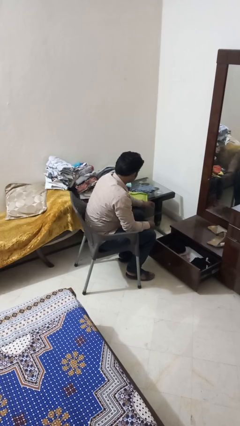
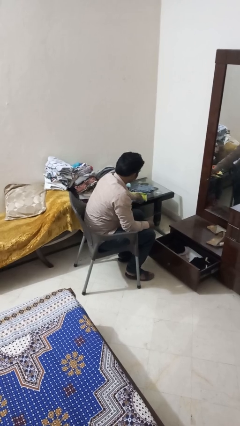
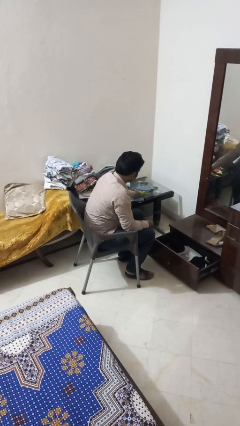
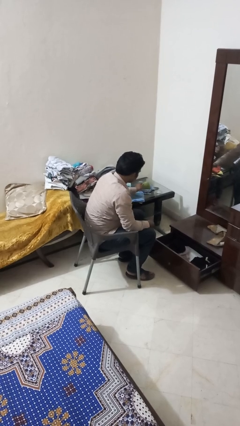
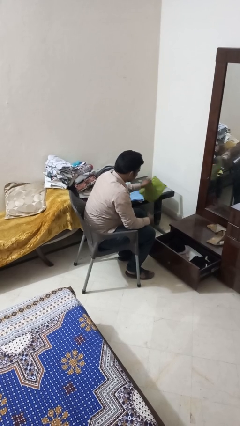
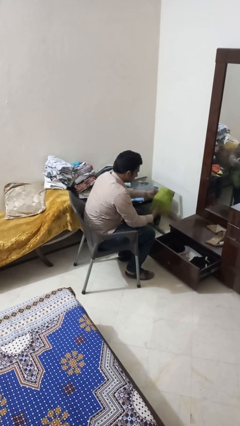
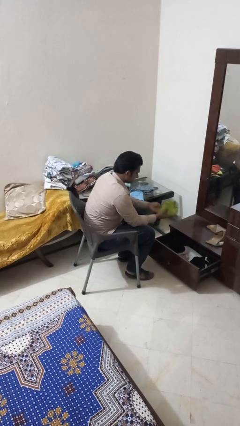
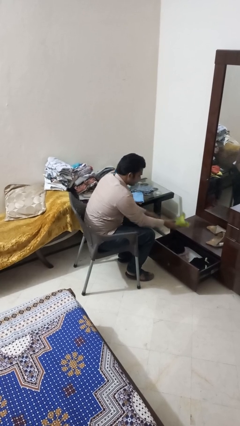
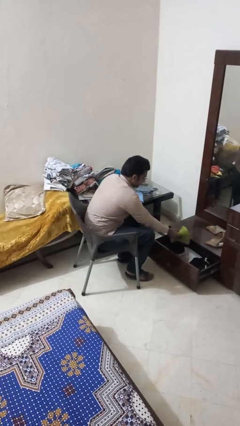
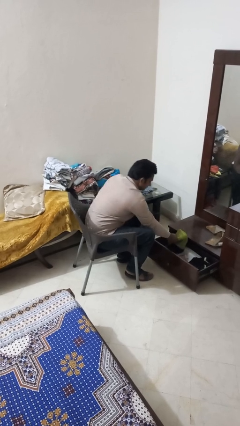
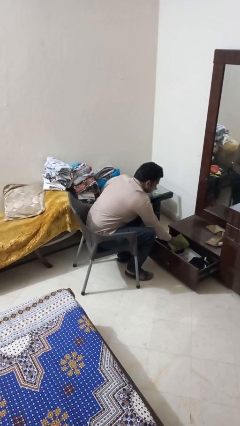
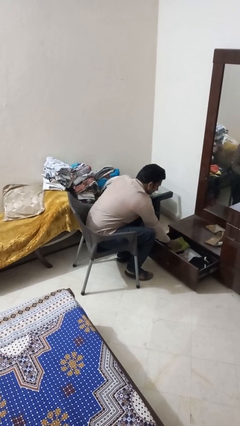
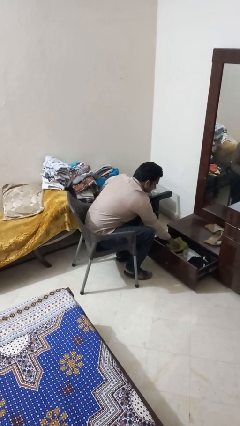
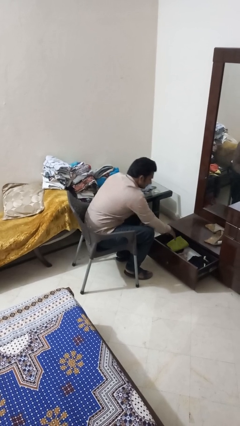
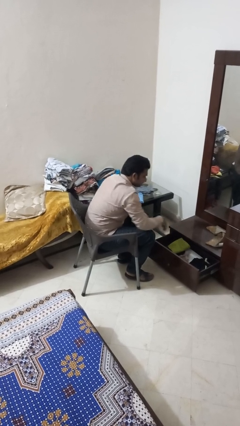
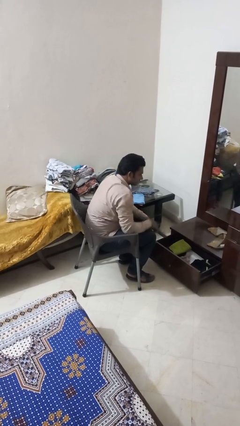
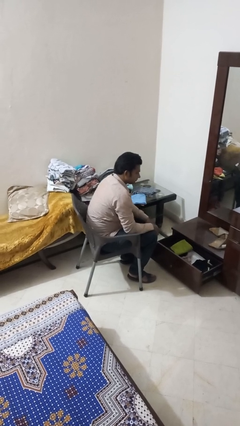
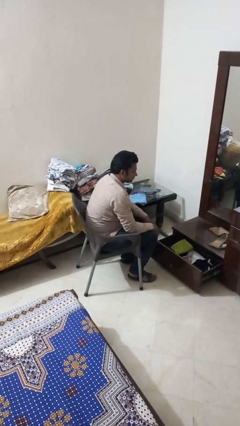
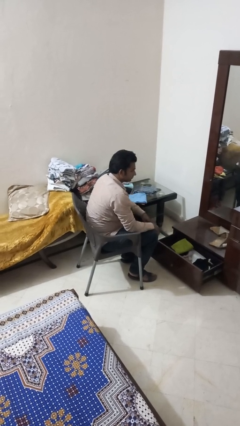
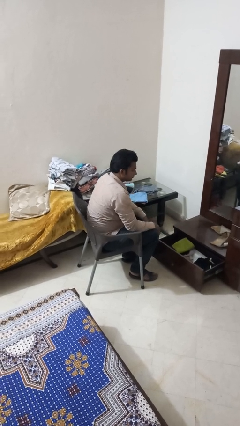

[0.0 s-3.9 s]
person puts clothes into dresser

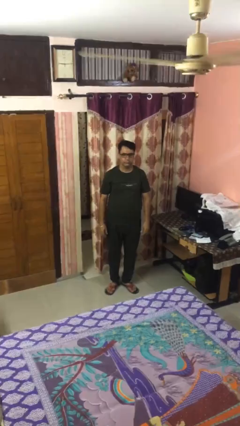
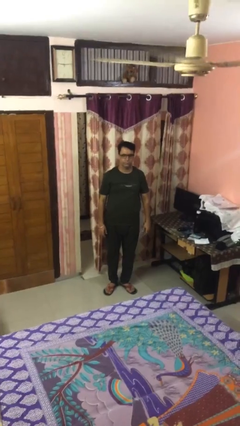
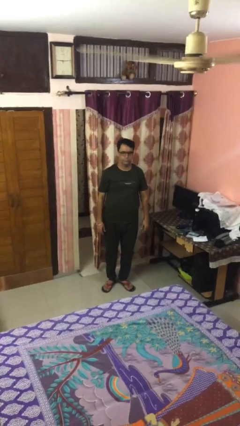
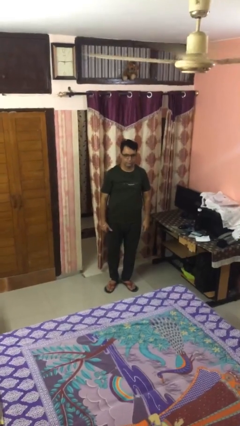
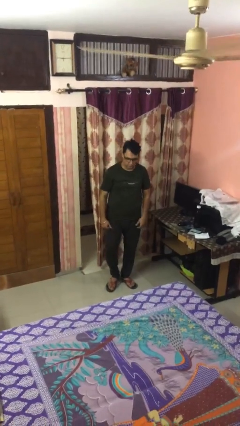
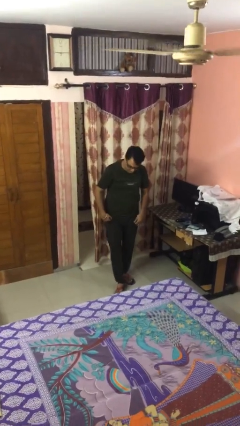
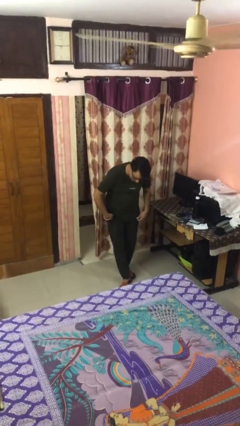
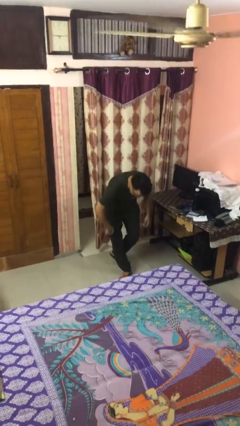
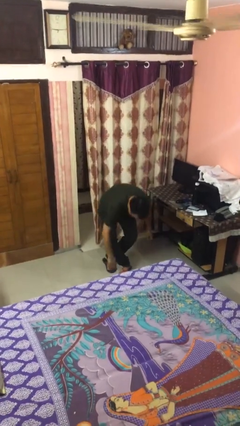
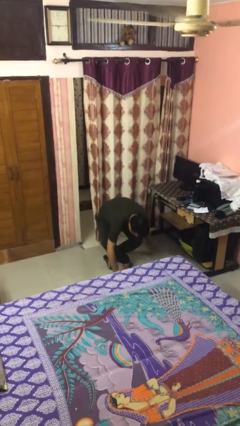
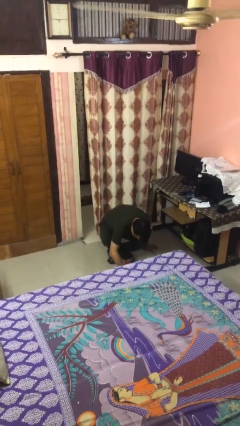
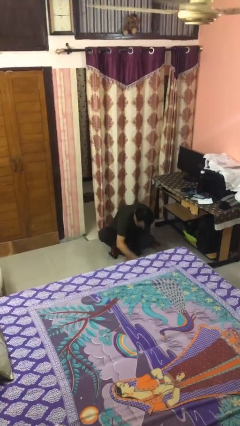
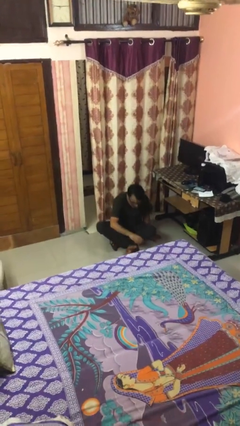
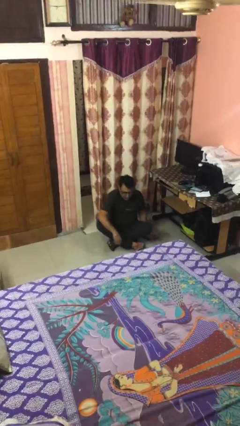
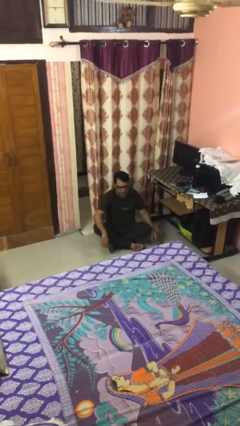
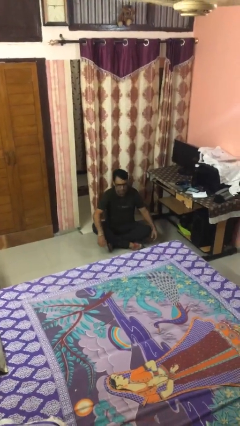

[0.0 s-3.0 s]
person sits crisscross

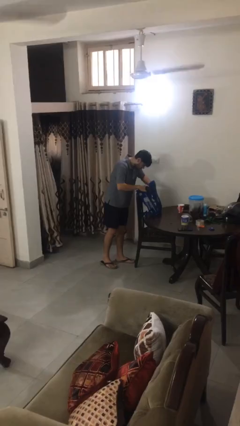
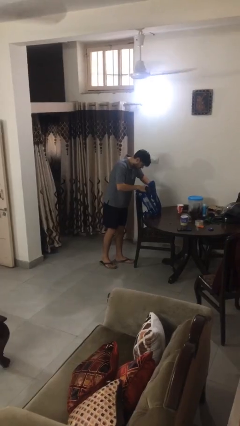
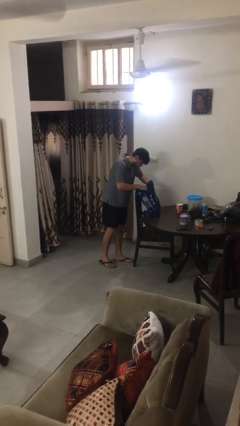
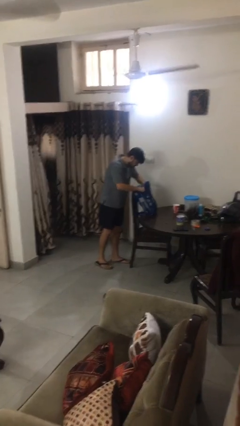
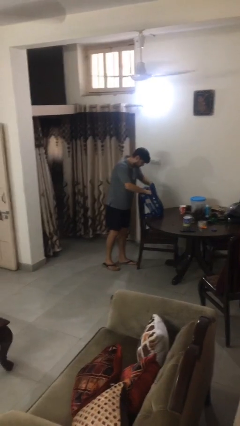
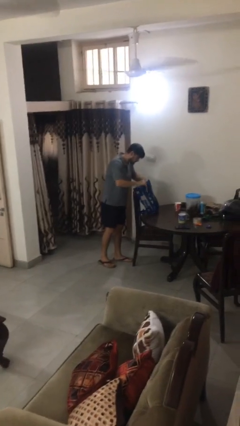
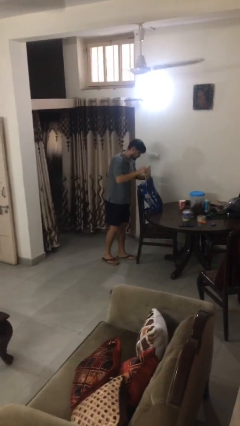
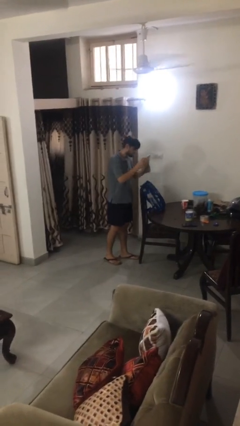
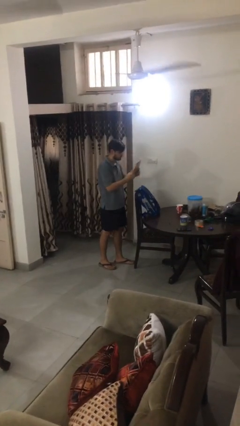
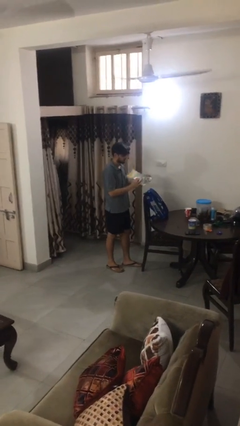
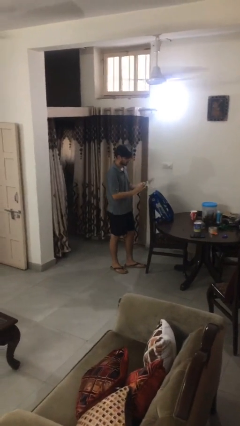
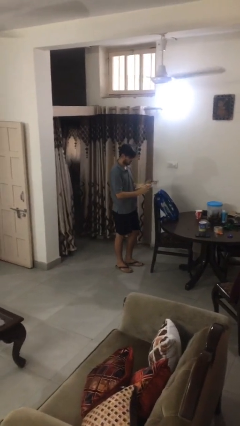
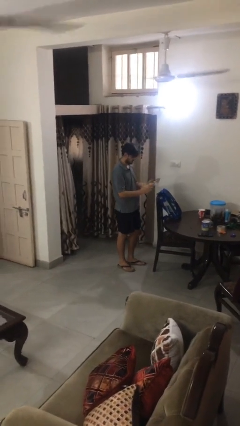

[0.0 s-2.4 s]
person takes object from backpack

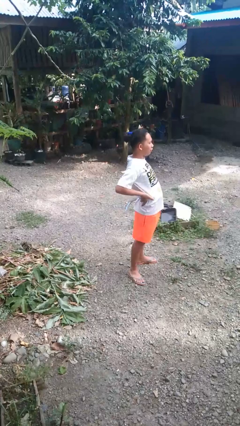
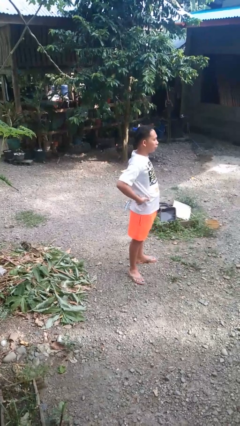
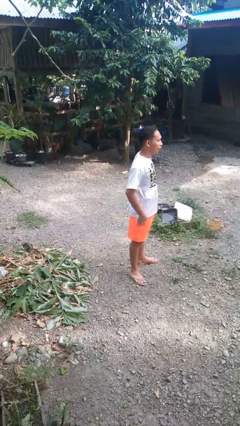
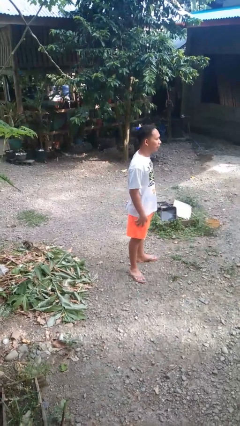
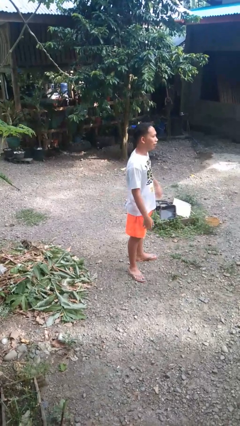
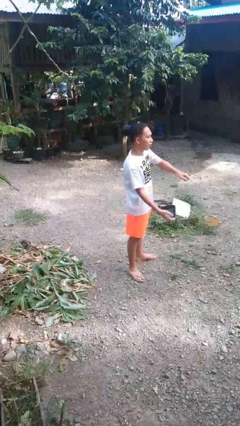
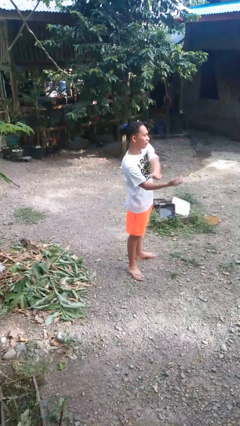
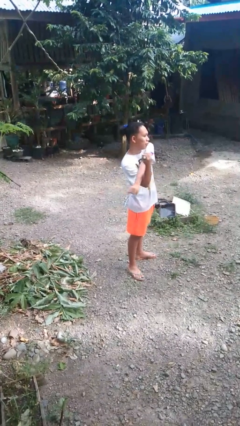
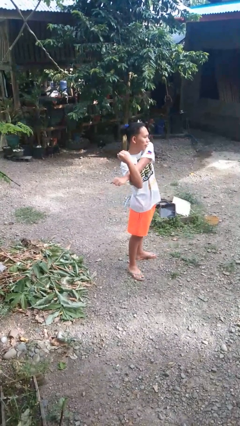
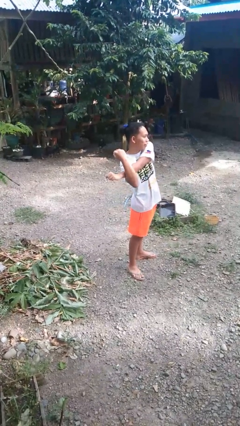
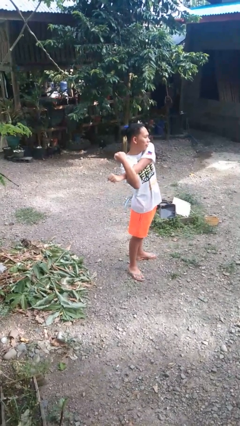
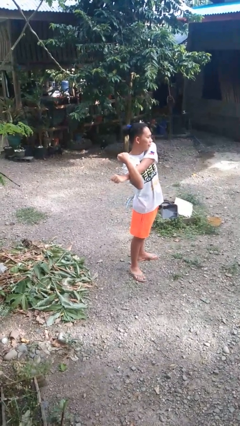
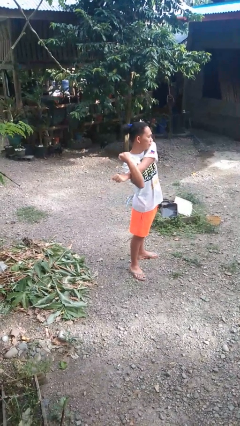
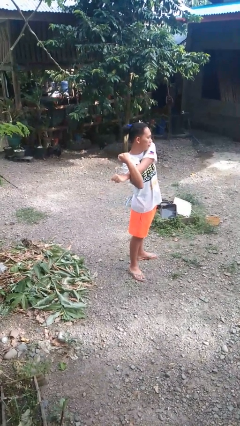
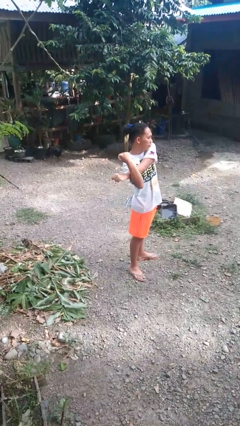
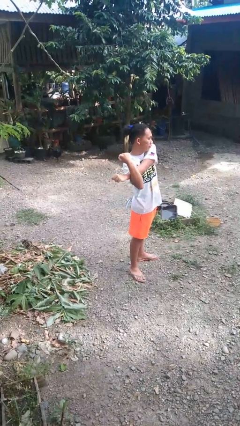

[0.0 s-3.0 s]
person stretches arms to side

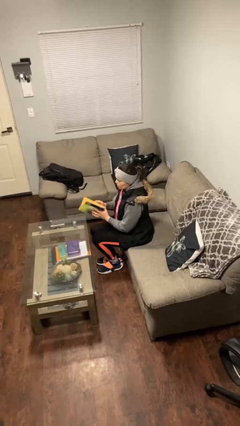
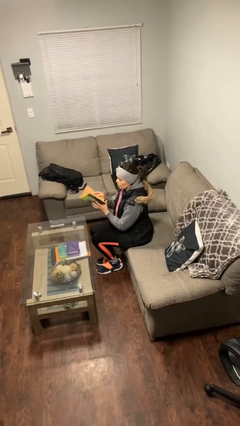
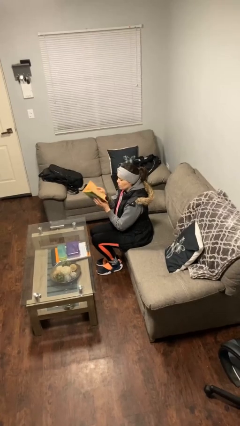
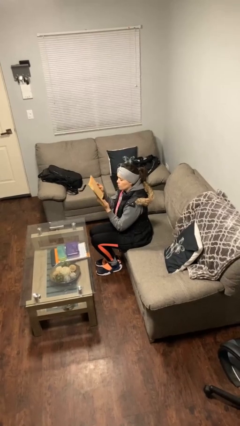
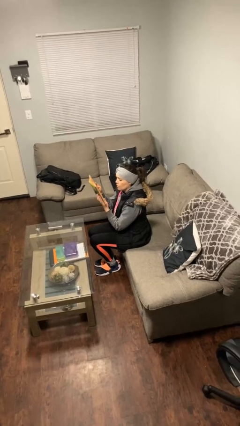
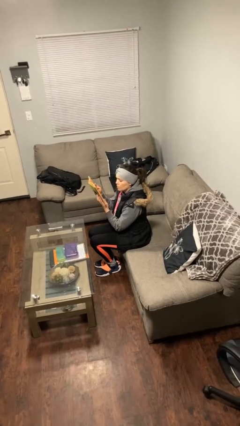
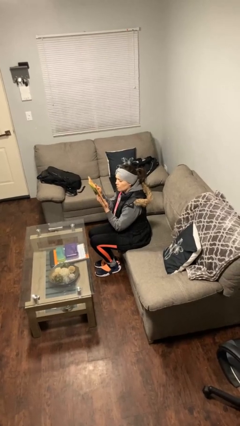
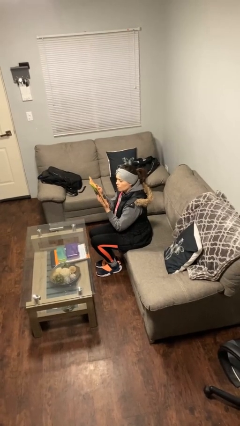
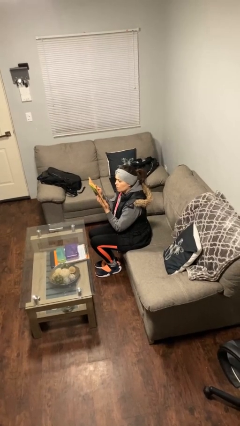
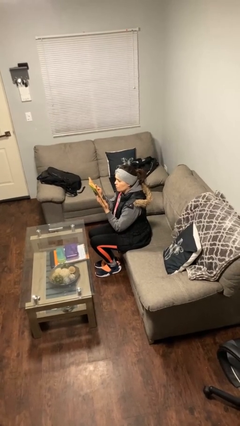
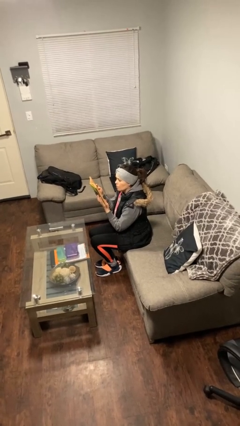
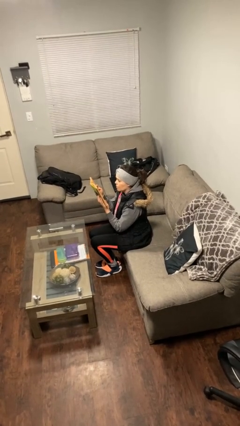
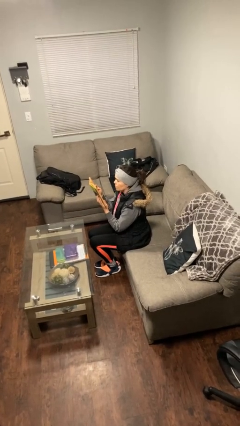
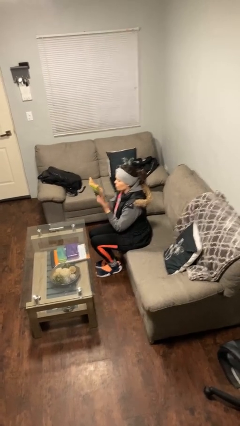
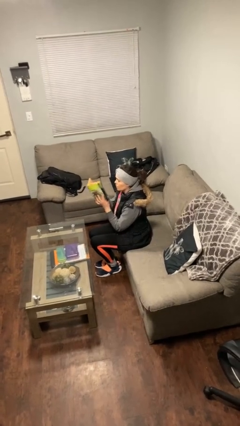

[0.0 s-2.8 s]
person reads document

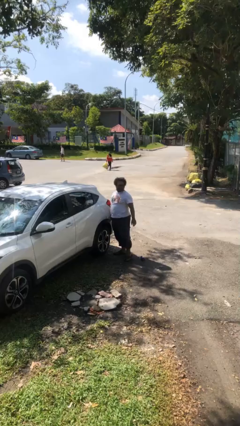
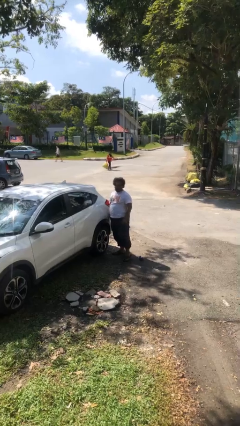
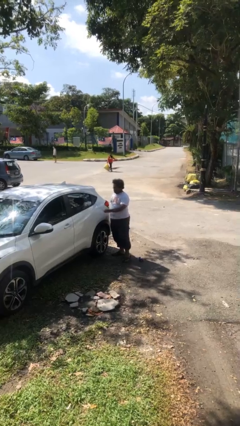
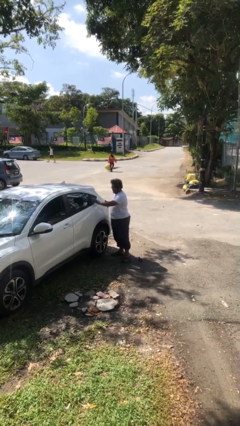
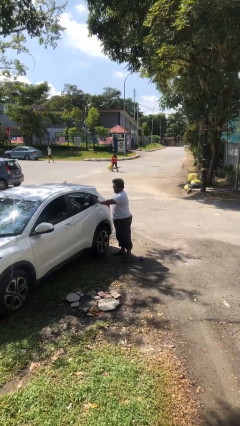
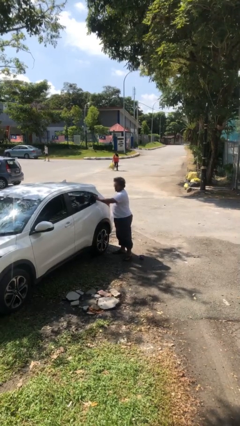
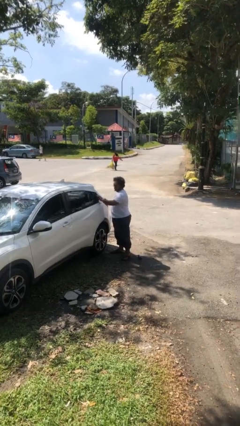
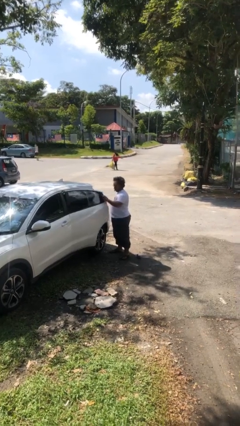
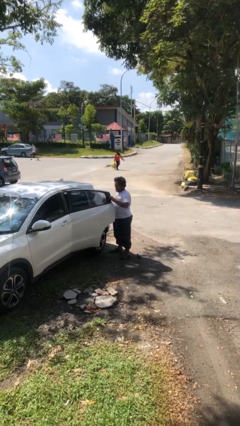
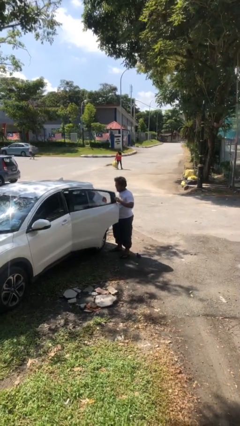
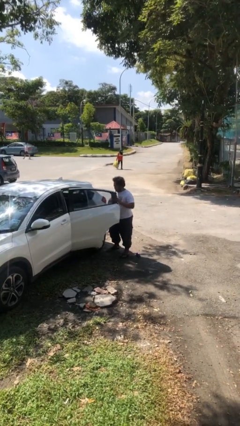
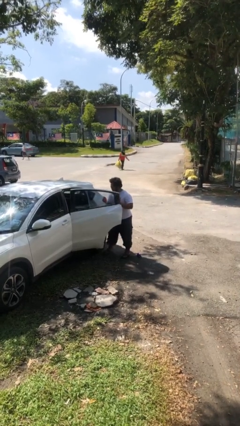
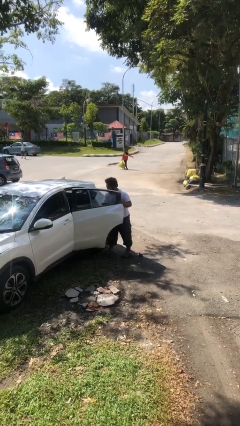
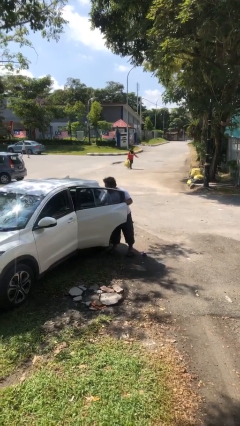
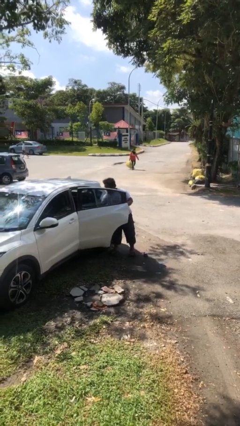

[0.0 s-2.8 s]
person opens car door
